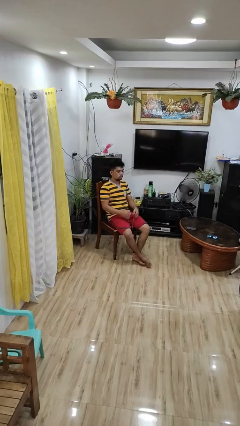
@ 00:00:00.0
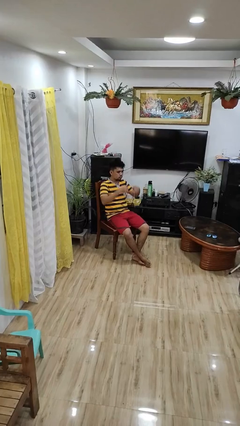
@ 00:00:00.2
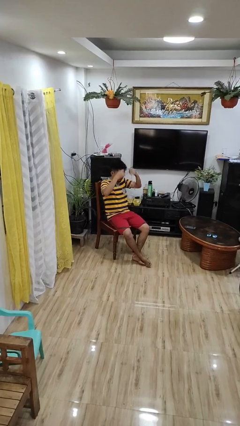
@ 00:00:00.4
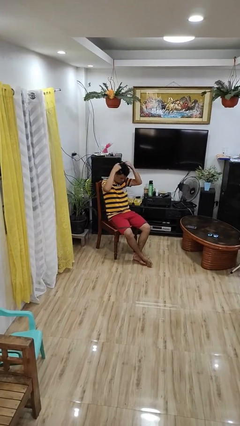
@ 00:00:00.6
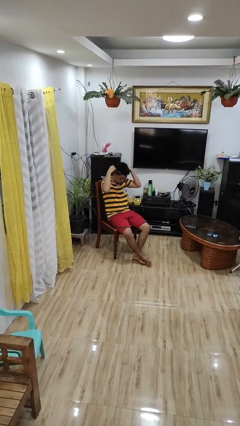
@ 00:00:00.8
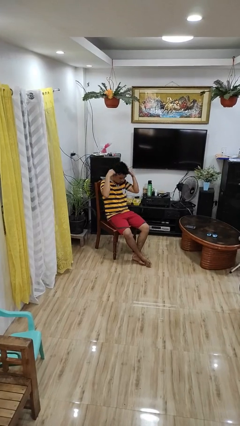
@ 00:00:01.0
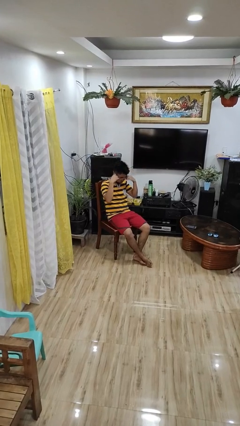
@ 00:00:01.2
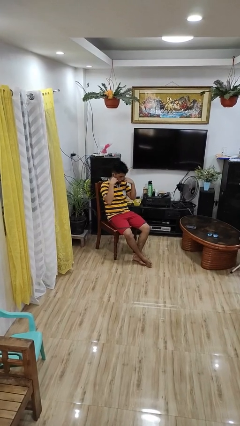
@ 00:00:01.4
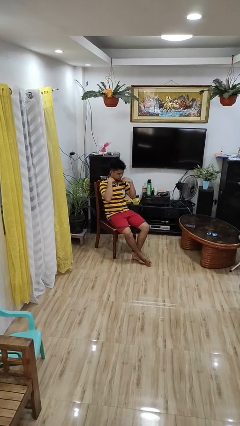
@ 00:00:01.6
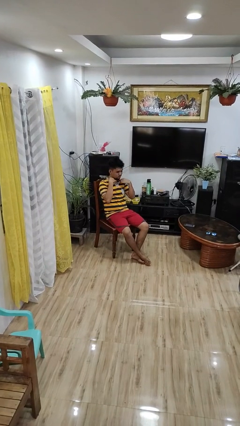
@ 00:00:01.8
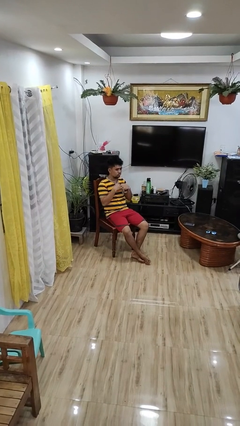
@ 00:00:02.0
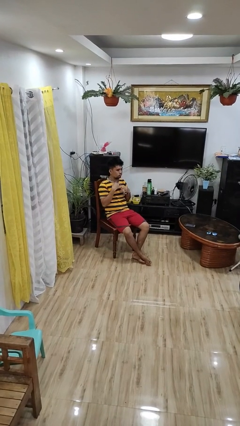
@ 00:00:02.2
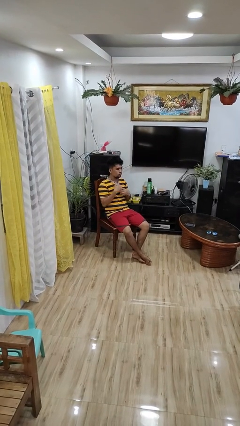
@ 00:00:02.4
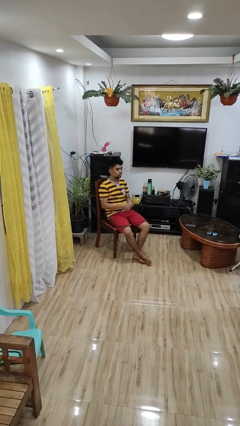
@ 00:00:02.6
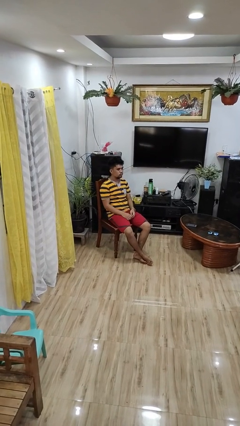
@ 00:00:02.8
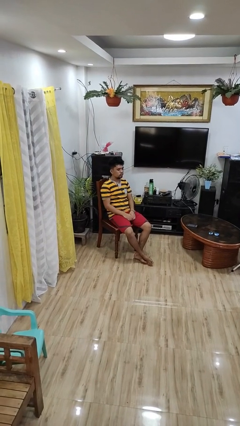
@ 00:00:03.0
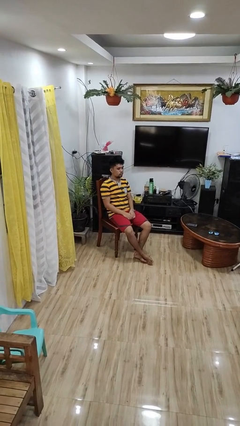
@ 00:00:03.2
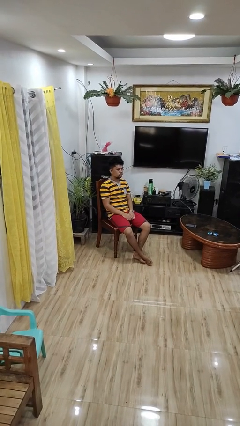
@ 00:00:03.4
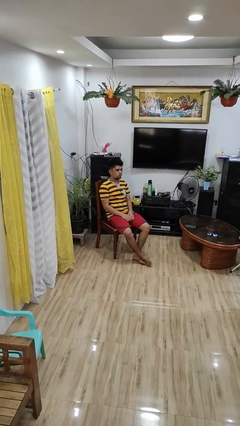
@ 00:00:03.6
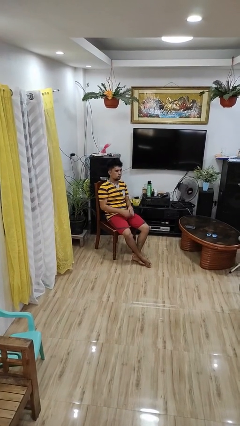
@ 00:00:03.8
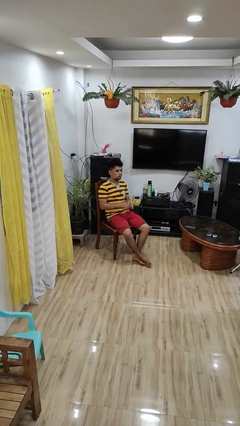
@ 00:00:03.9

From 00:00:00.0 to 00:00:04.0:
person puts on necklace

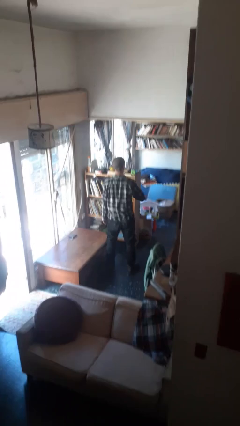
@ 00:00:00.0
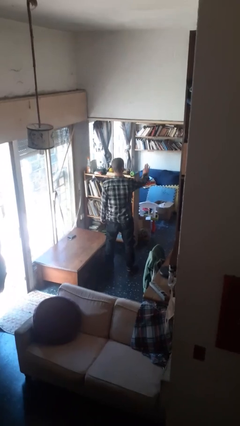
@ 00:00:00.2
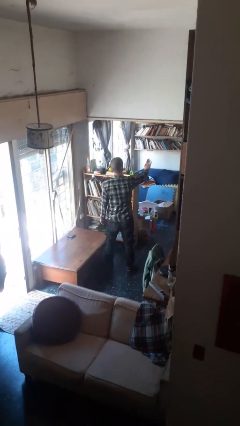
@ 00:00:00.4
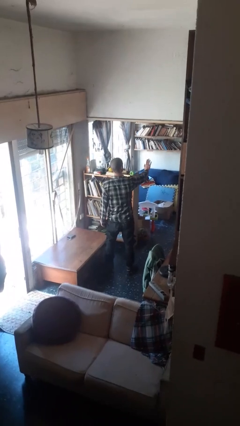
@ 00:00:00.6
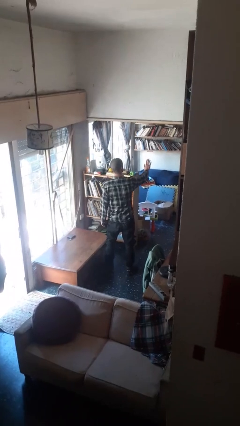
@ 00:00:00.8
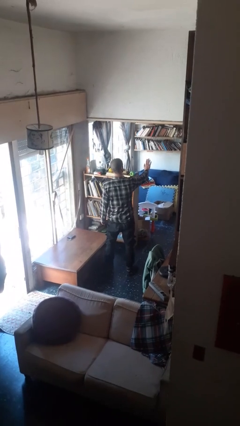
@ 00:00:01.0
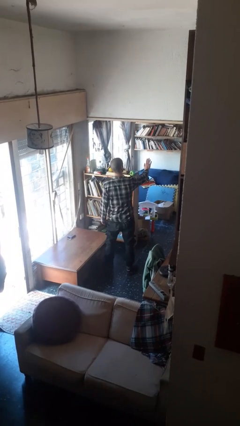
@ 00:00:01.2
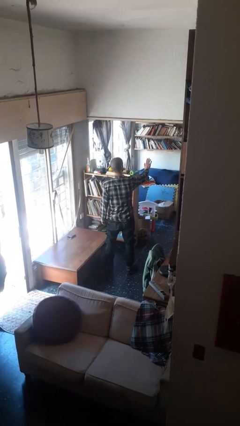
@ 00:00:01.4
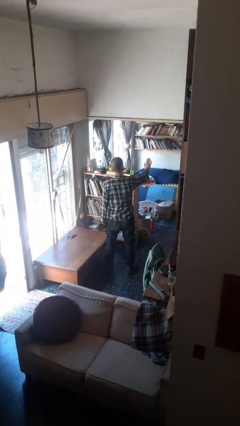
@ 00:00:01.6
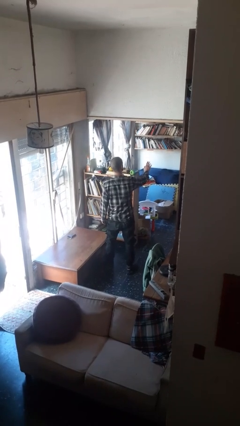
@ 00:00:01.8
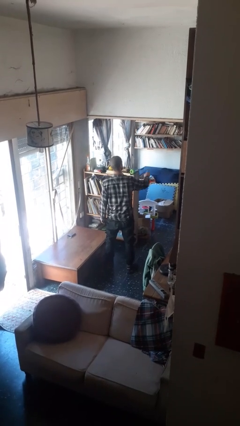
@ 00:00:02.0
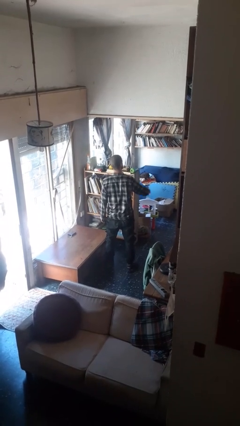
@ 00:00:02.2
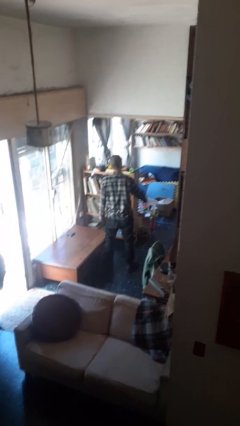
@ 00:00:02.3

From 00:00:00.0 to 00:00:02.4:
person gestures stop

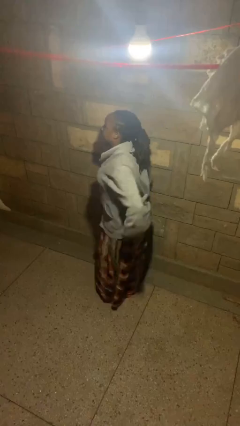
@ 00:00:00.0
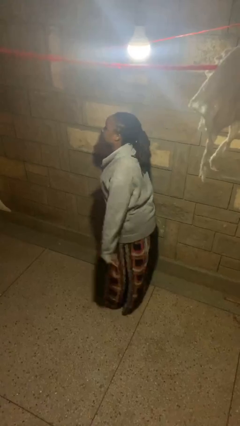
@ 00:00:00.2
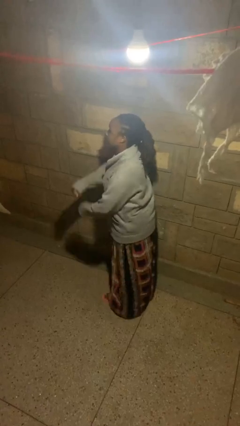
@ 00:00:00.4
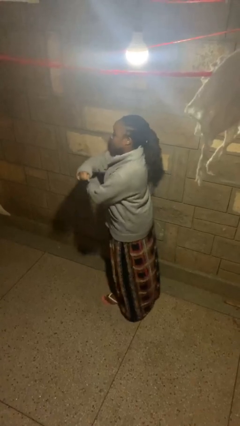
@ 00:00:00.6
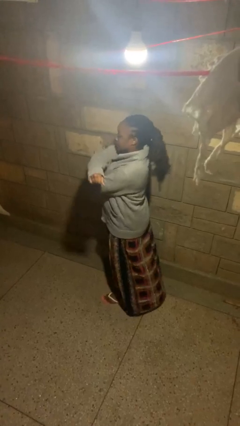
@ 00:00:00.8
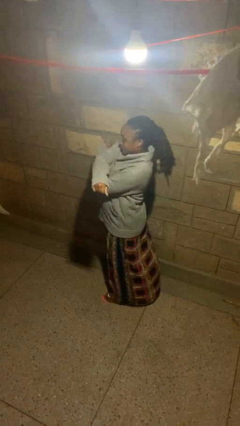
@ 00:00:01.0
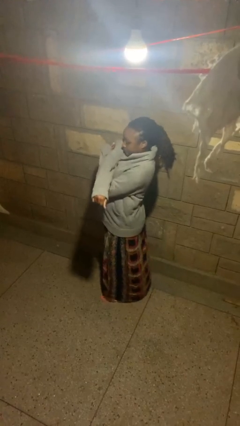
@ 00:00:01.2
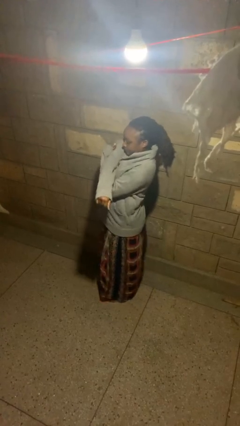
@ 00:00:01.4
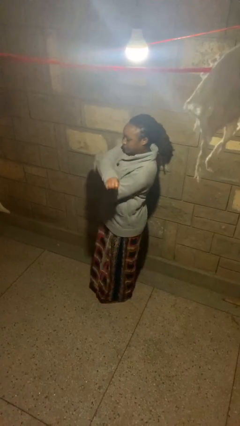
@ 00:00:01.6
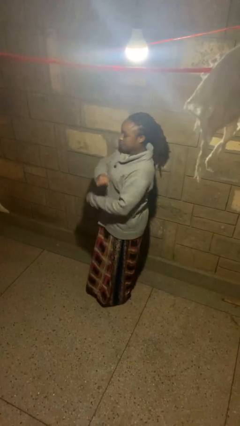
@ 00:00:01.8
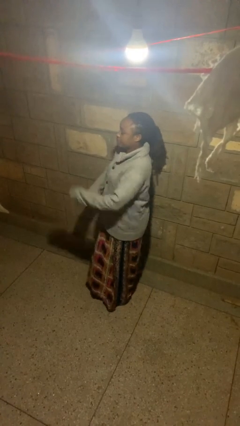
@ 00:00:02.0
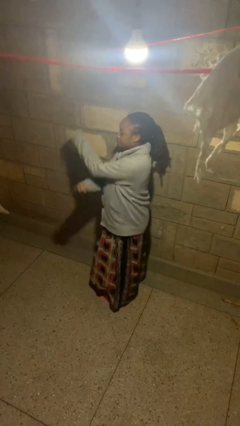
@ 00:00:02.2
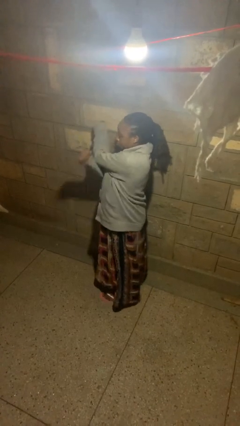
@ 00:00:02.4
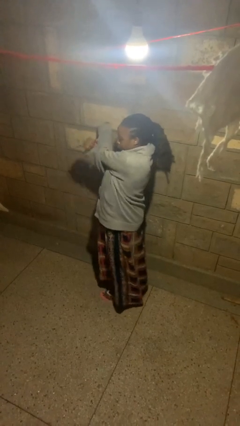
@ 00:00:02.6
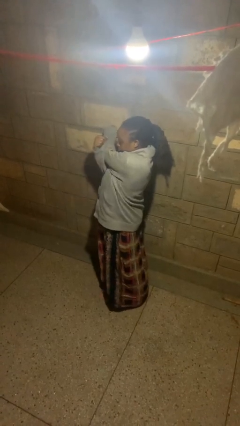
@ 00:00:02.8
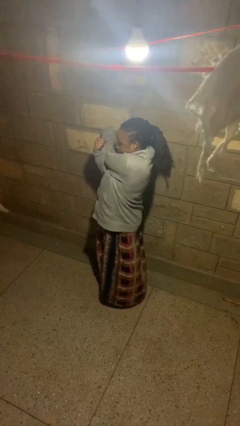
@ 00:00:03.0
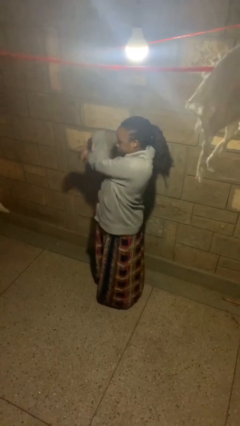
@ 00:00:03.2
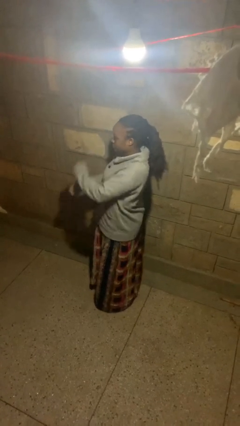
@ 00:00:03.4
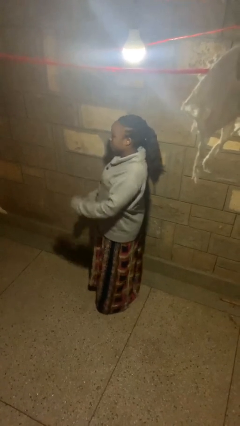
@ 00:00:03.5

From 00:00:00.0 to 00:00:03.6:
person stretches arms to side

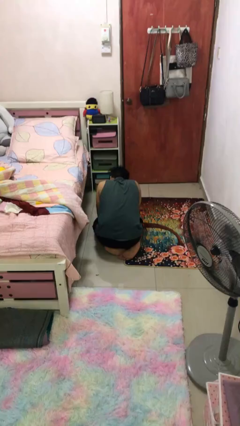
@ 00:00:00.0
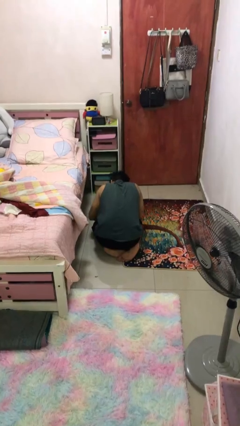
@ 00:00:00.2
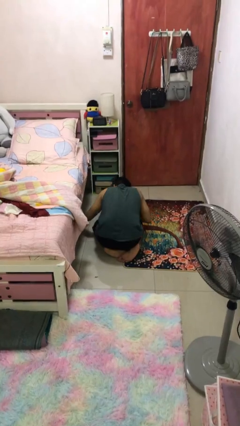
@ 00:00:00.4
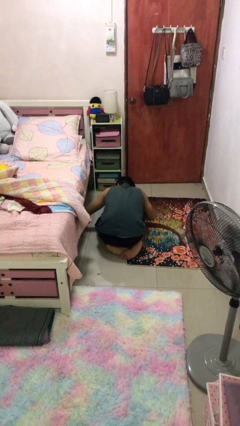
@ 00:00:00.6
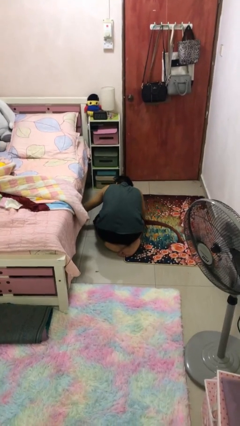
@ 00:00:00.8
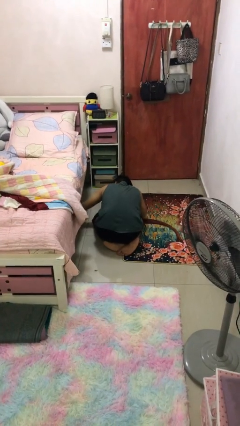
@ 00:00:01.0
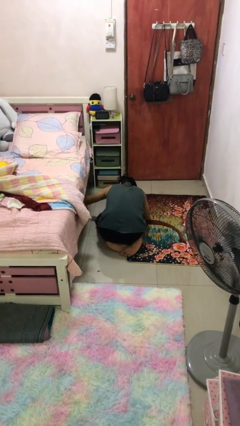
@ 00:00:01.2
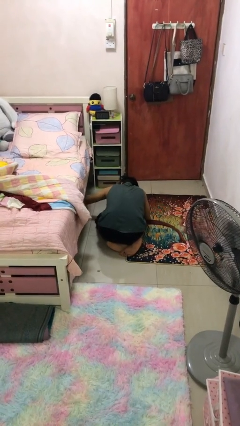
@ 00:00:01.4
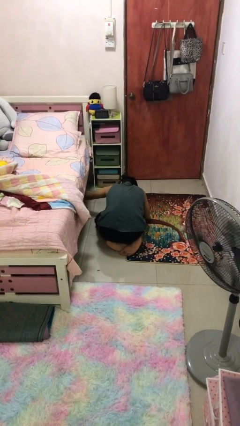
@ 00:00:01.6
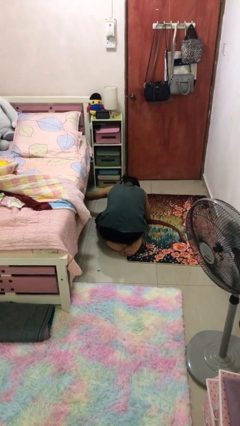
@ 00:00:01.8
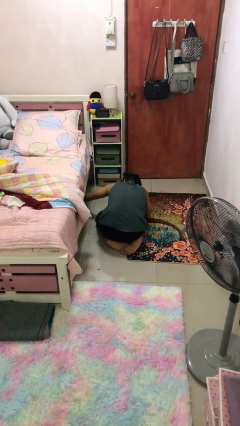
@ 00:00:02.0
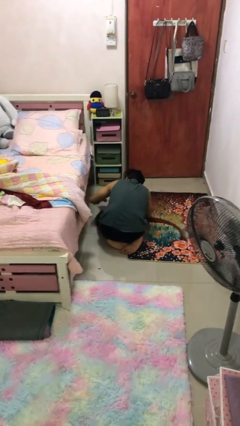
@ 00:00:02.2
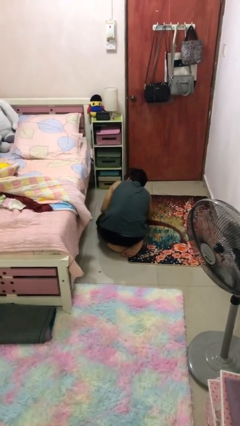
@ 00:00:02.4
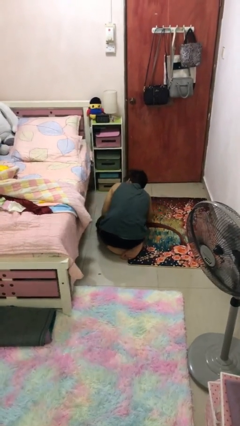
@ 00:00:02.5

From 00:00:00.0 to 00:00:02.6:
person searches under bed

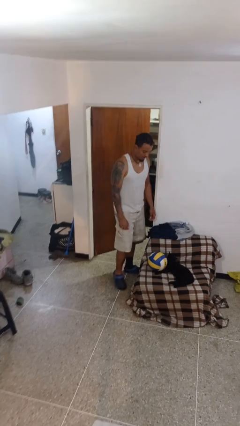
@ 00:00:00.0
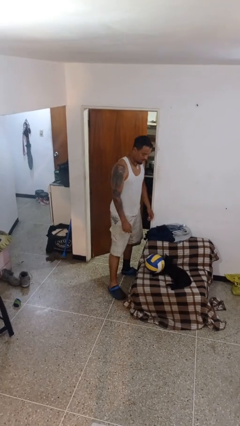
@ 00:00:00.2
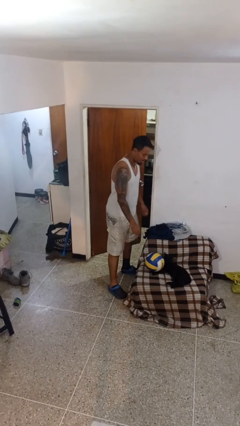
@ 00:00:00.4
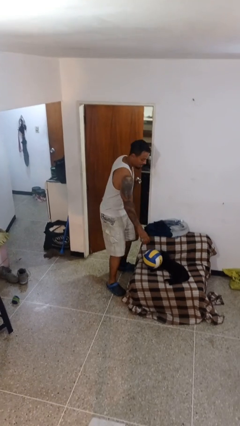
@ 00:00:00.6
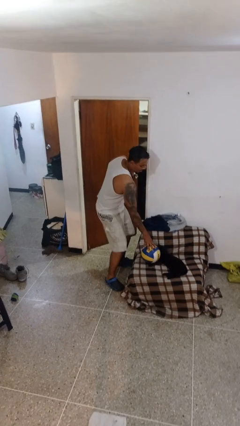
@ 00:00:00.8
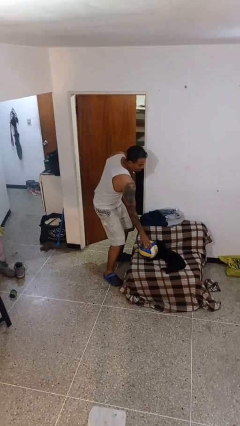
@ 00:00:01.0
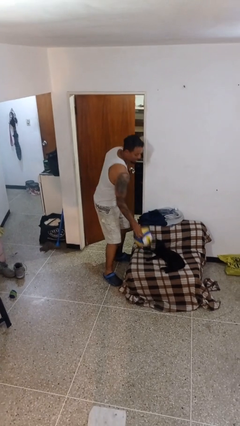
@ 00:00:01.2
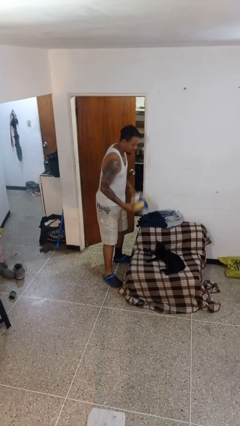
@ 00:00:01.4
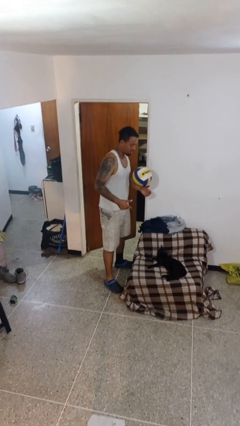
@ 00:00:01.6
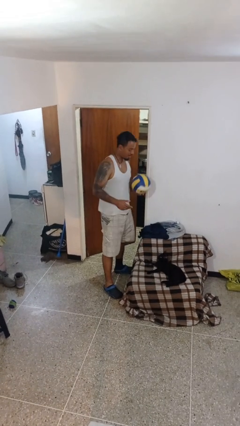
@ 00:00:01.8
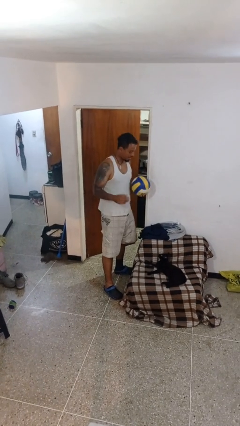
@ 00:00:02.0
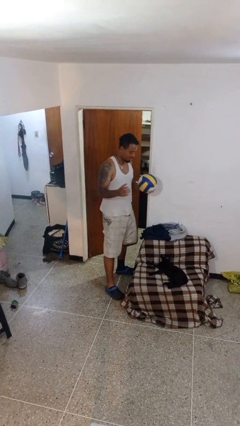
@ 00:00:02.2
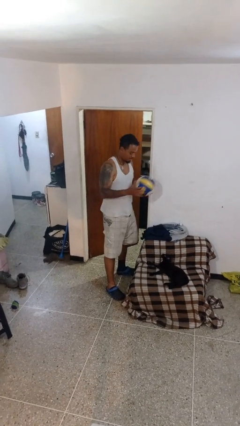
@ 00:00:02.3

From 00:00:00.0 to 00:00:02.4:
person picks up object from couch

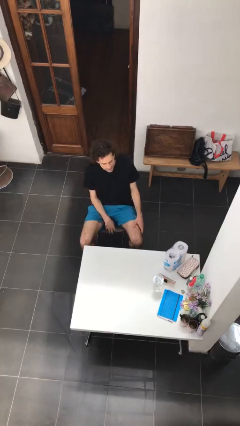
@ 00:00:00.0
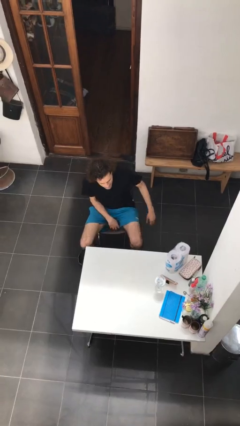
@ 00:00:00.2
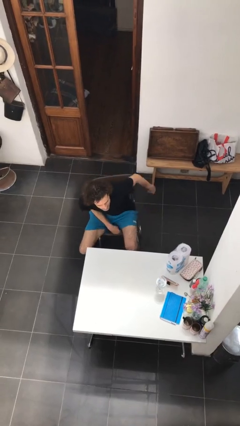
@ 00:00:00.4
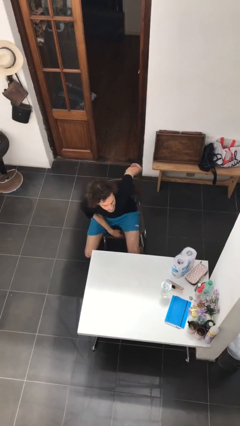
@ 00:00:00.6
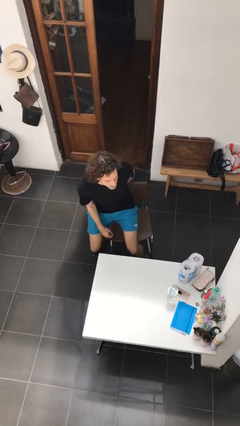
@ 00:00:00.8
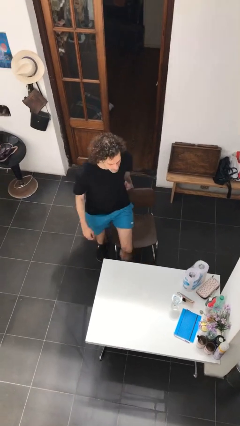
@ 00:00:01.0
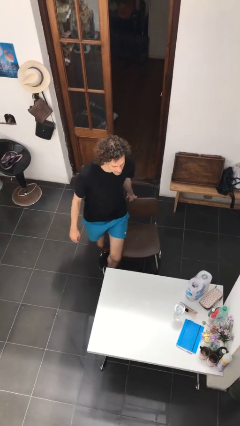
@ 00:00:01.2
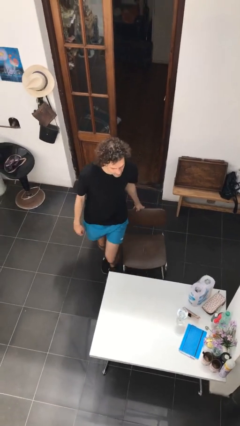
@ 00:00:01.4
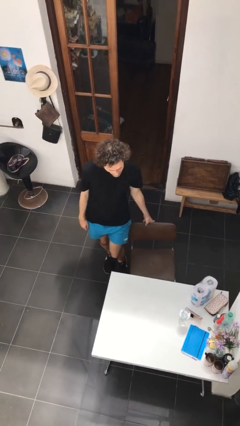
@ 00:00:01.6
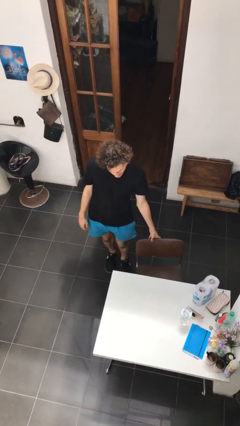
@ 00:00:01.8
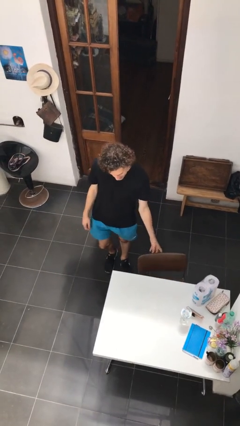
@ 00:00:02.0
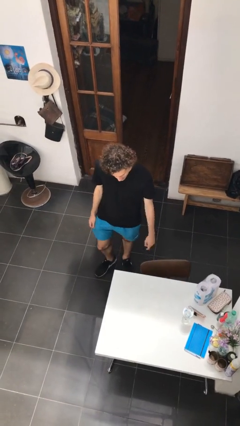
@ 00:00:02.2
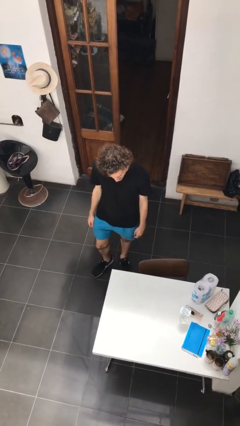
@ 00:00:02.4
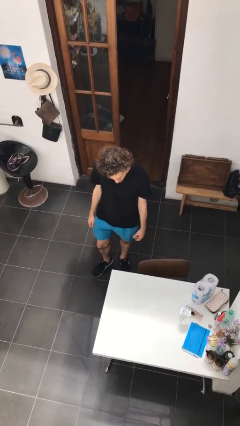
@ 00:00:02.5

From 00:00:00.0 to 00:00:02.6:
person stands up
